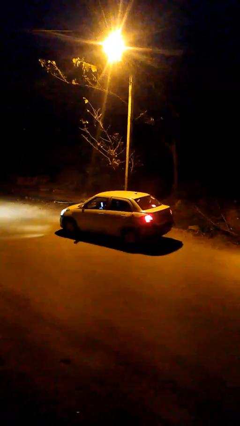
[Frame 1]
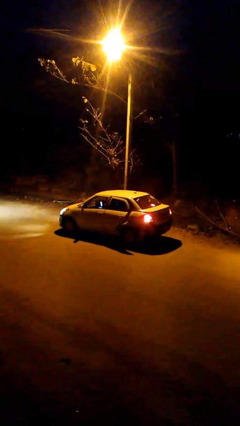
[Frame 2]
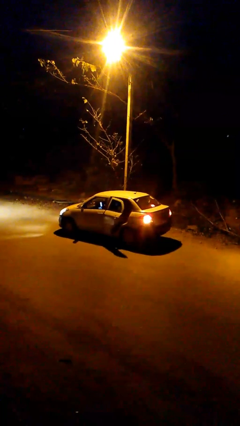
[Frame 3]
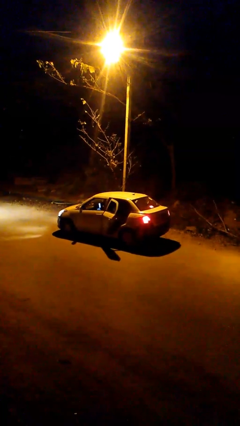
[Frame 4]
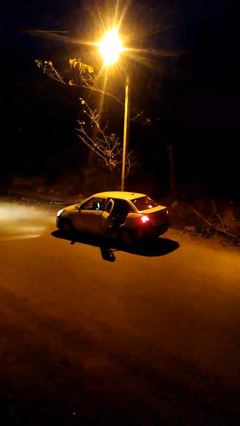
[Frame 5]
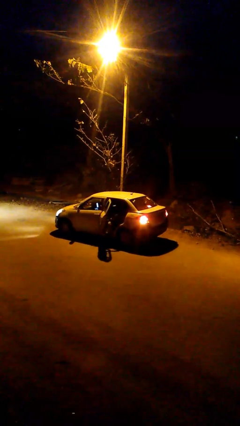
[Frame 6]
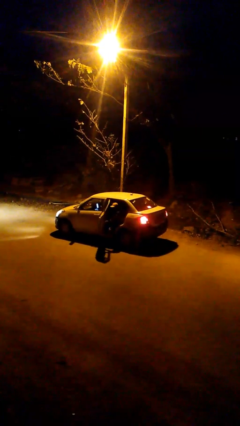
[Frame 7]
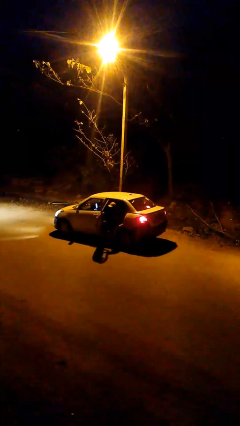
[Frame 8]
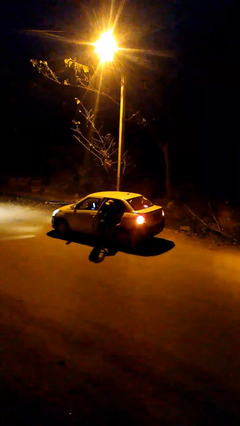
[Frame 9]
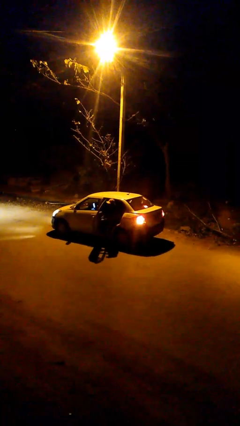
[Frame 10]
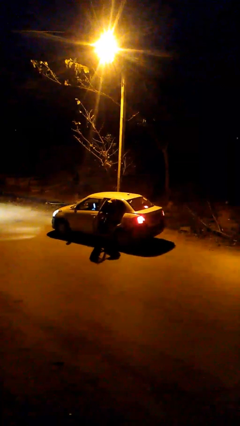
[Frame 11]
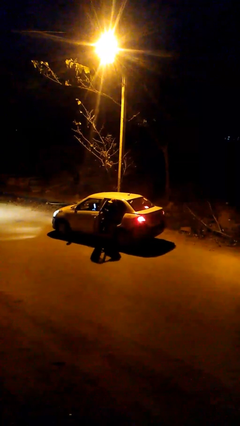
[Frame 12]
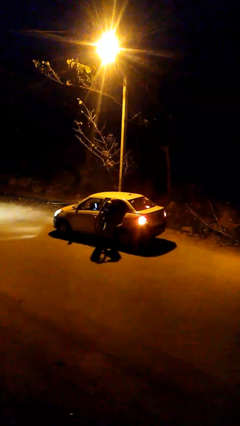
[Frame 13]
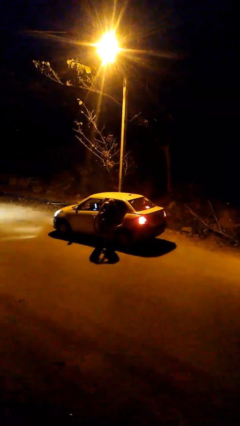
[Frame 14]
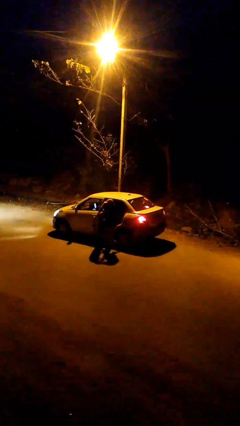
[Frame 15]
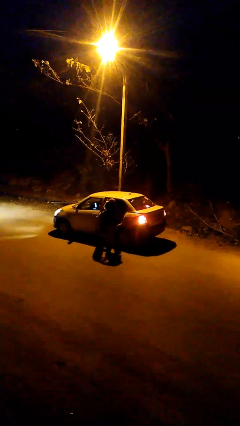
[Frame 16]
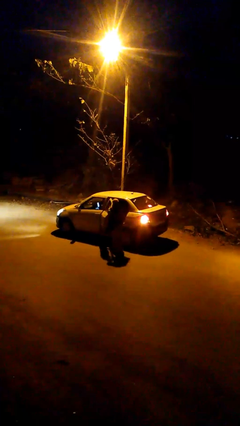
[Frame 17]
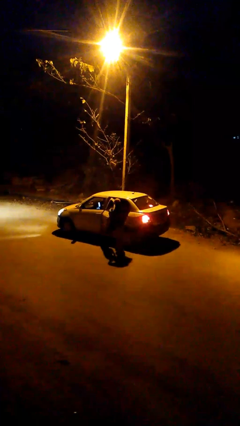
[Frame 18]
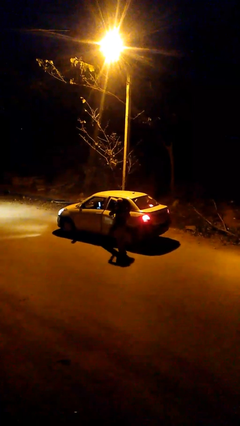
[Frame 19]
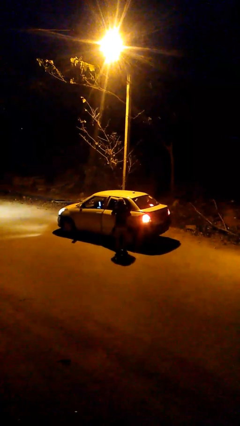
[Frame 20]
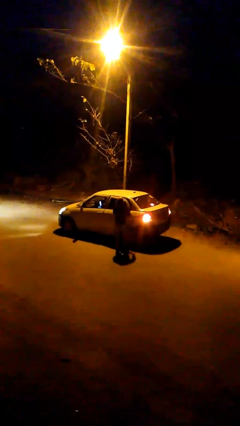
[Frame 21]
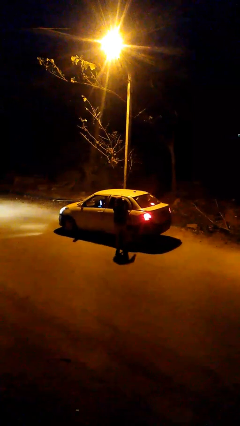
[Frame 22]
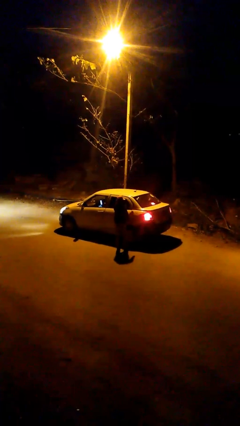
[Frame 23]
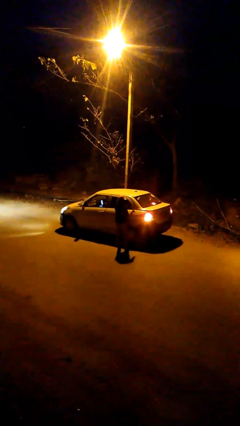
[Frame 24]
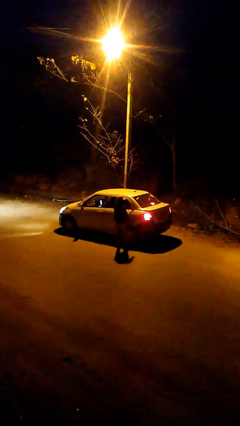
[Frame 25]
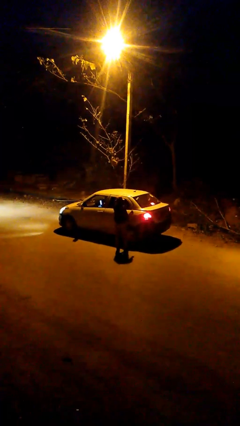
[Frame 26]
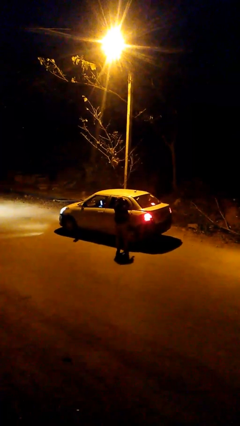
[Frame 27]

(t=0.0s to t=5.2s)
car drops off person

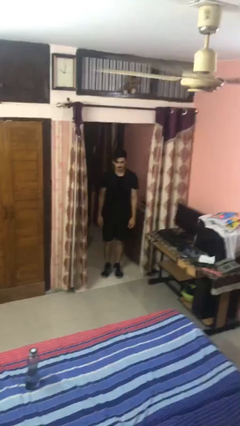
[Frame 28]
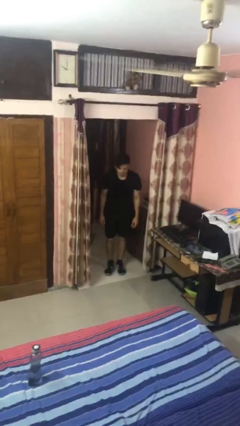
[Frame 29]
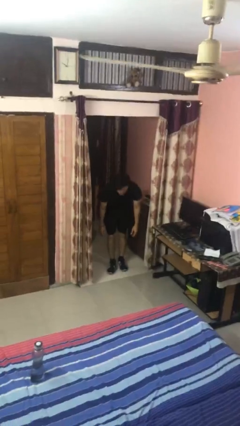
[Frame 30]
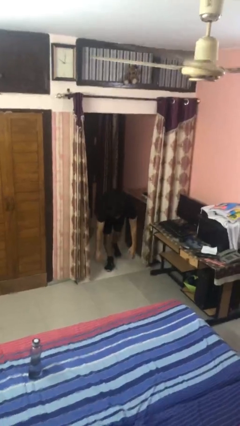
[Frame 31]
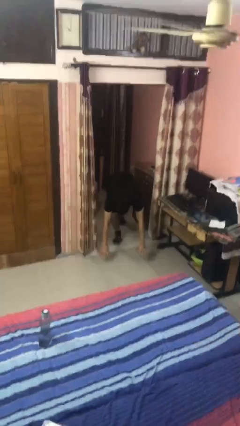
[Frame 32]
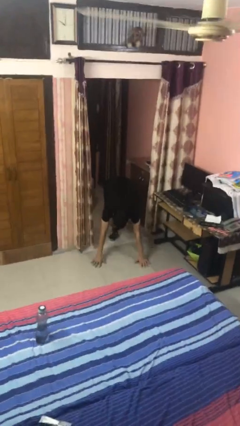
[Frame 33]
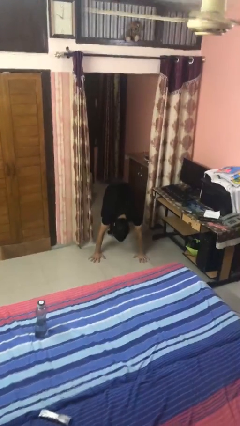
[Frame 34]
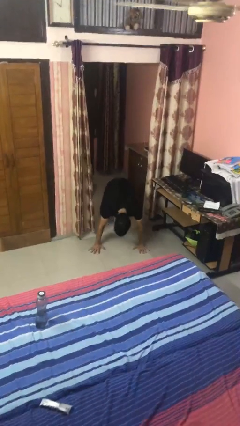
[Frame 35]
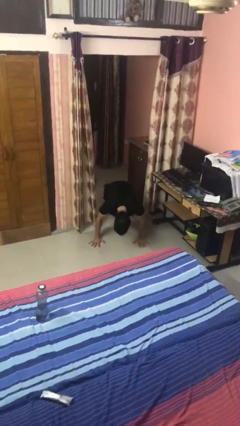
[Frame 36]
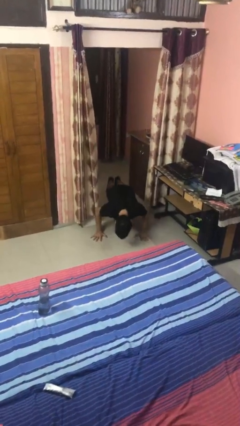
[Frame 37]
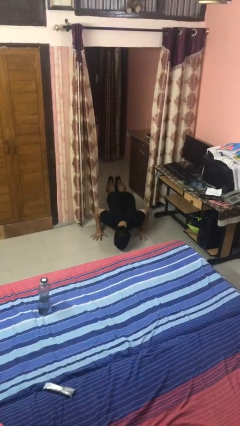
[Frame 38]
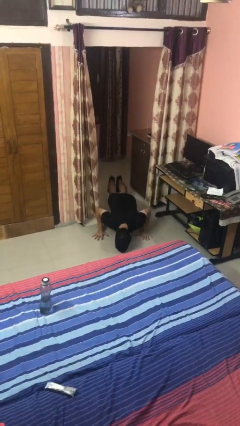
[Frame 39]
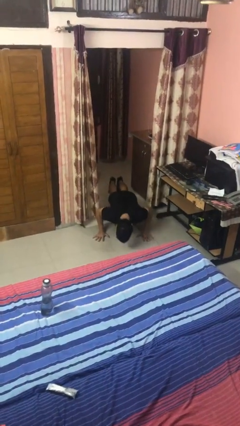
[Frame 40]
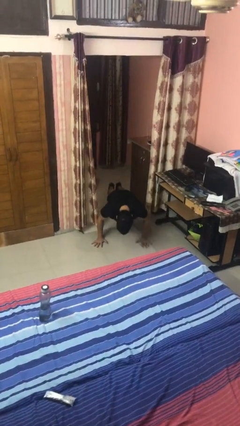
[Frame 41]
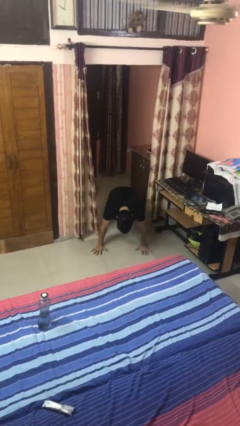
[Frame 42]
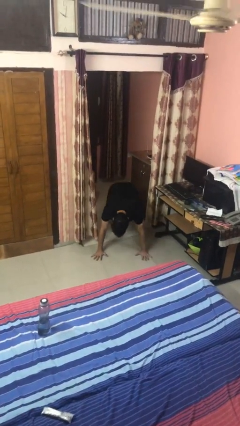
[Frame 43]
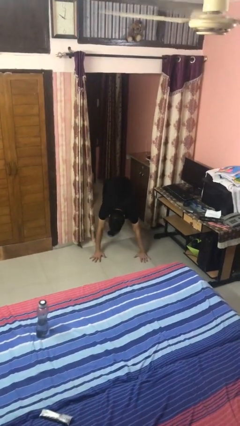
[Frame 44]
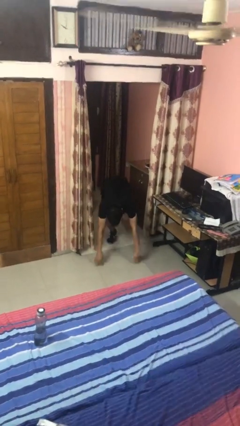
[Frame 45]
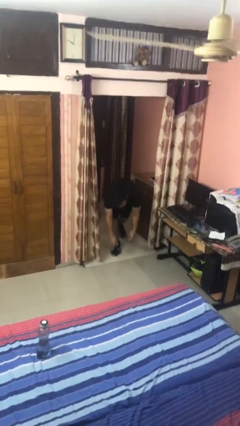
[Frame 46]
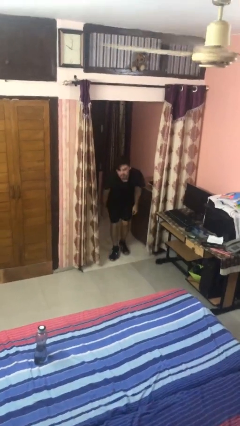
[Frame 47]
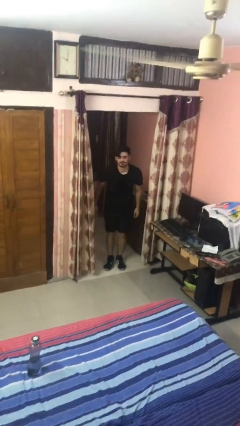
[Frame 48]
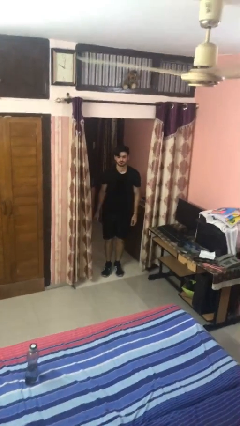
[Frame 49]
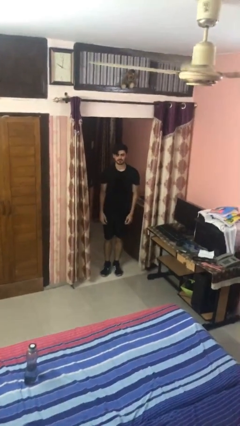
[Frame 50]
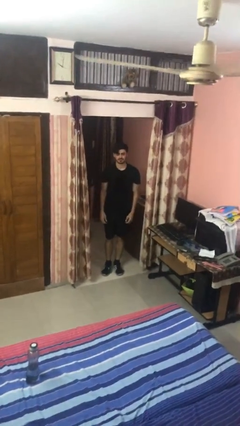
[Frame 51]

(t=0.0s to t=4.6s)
person exercises with pushup

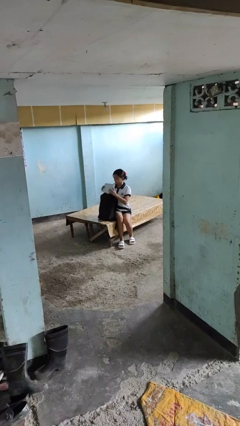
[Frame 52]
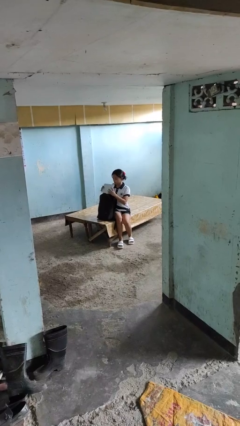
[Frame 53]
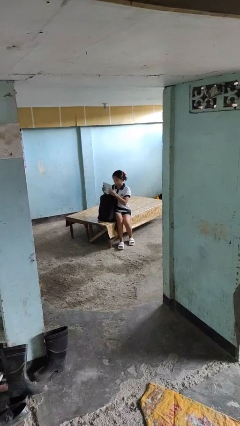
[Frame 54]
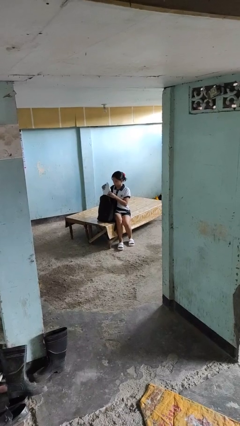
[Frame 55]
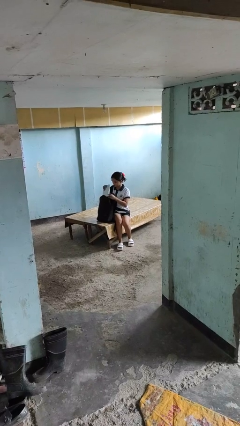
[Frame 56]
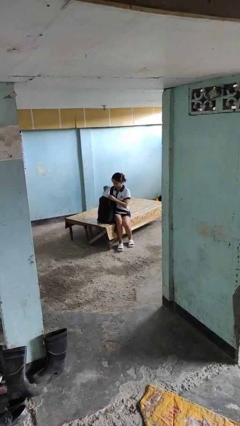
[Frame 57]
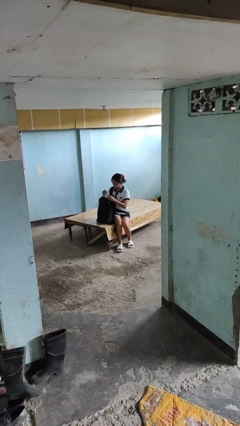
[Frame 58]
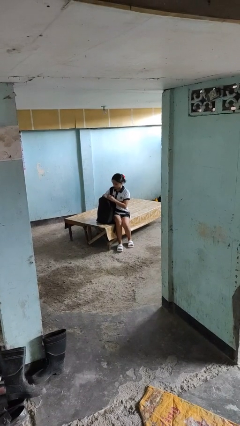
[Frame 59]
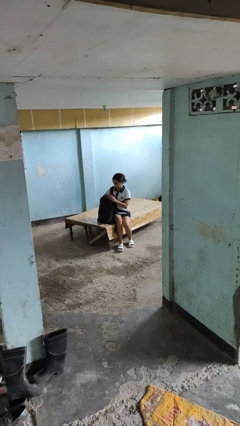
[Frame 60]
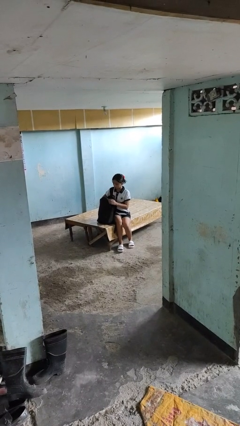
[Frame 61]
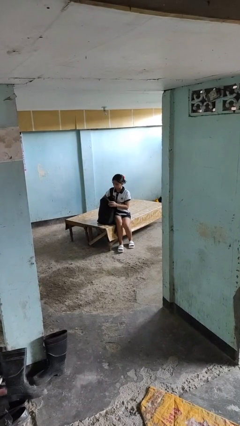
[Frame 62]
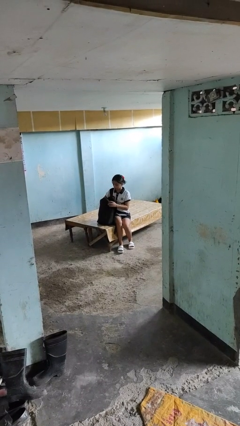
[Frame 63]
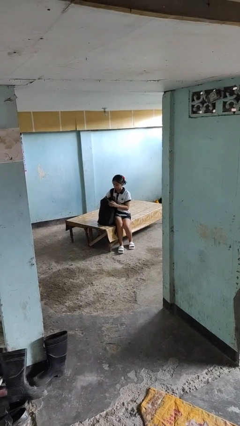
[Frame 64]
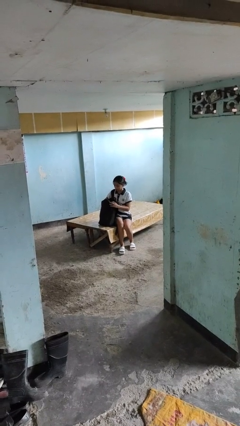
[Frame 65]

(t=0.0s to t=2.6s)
person puts object into backpack

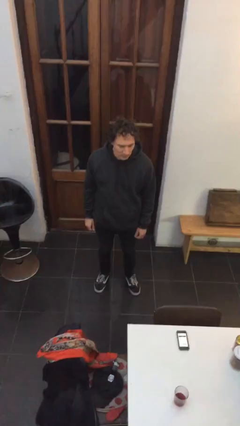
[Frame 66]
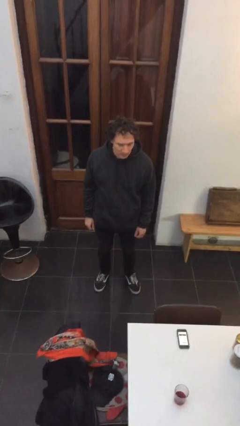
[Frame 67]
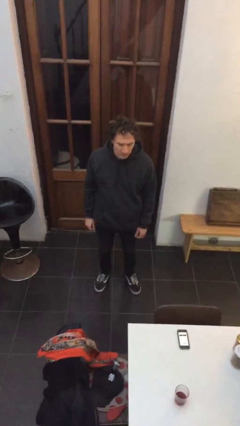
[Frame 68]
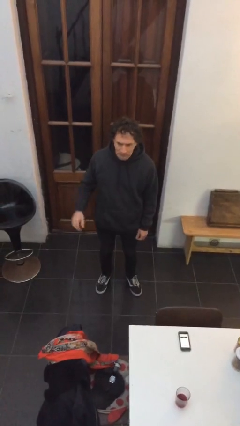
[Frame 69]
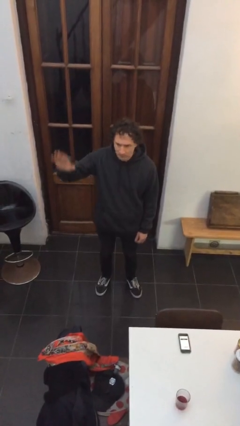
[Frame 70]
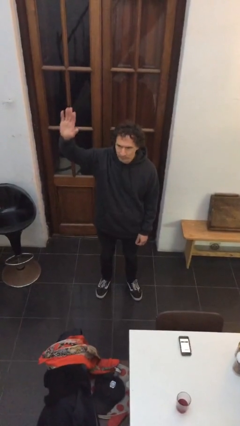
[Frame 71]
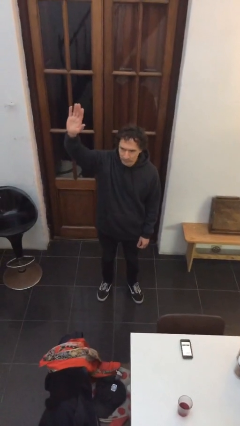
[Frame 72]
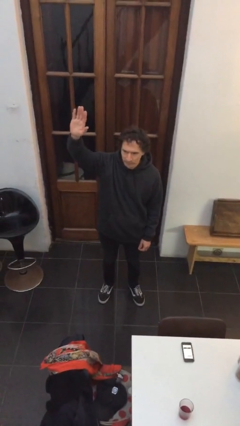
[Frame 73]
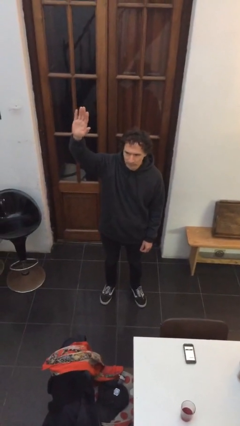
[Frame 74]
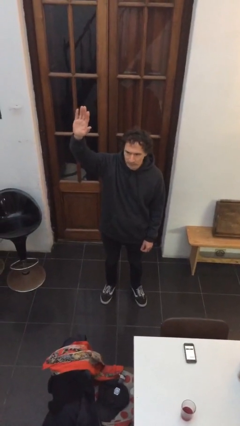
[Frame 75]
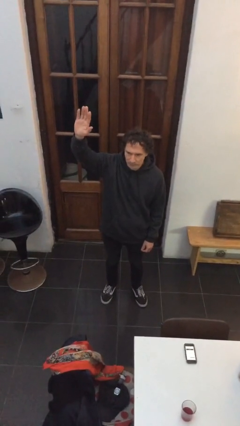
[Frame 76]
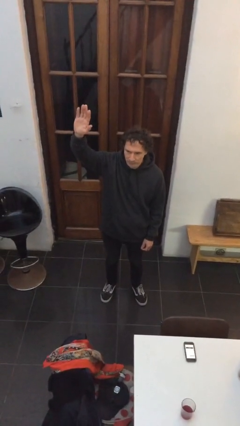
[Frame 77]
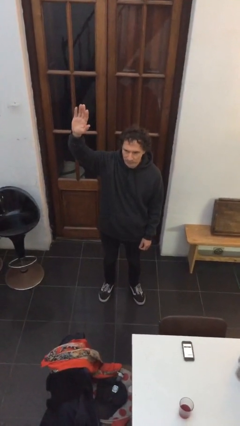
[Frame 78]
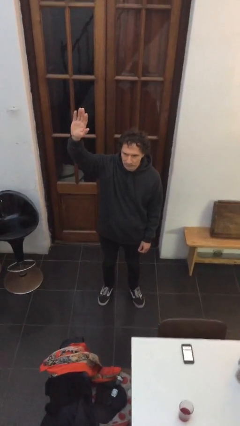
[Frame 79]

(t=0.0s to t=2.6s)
person gestures raise hand

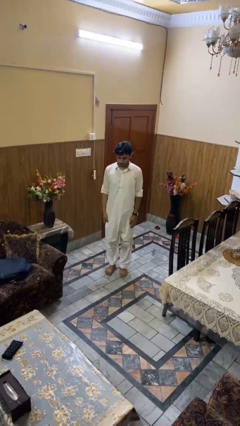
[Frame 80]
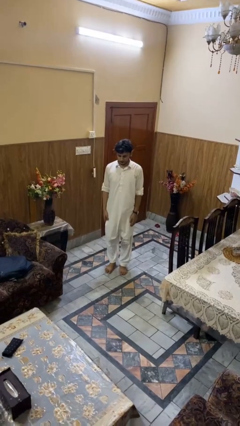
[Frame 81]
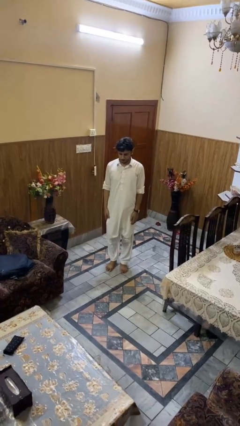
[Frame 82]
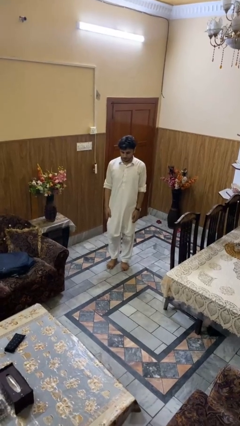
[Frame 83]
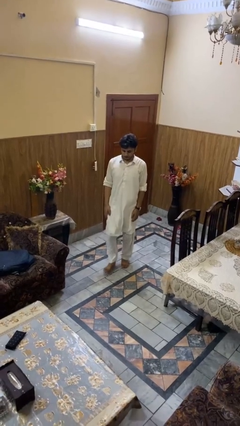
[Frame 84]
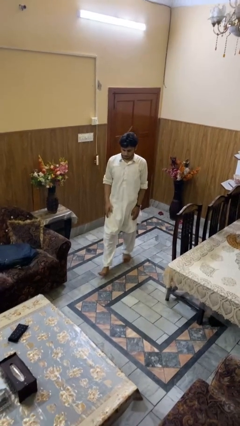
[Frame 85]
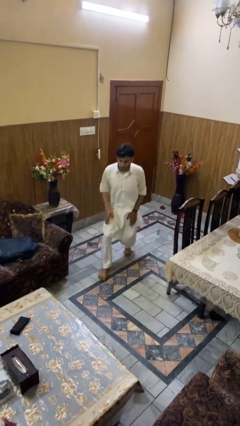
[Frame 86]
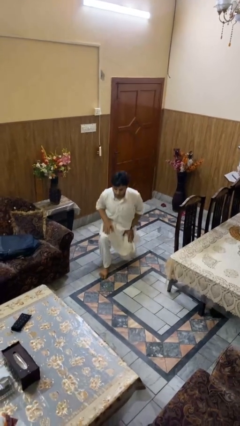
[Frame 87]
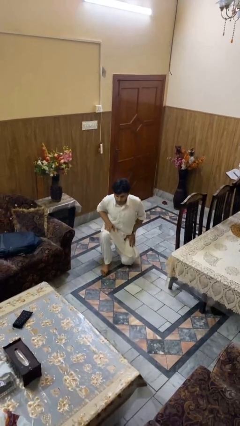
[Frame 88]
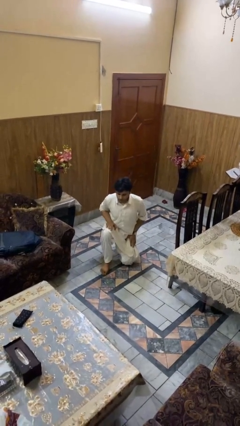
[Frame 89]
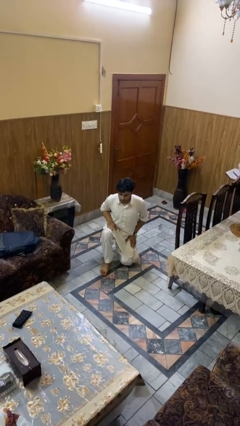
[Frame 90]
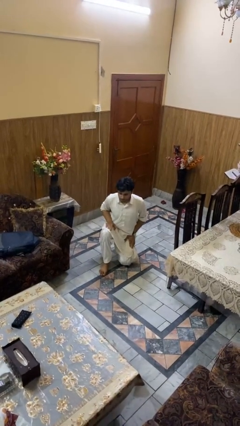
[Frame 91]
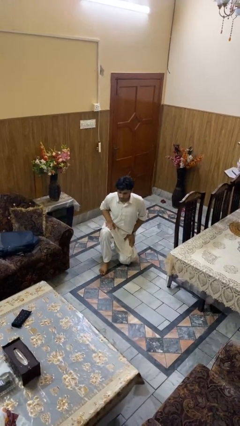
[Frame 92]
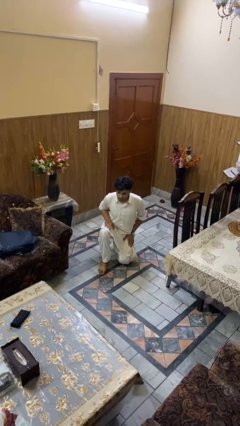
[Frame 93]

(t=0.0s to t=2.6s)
person kneels
